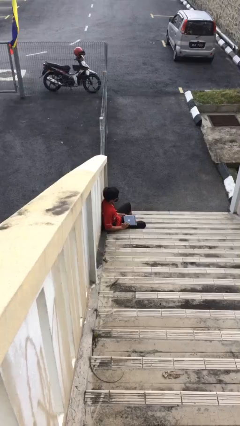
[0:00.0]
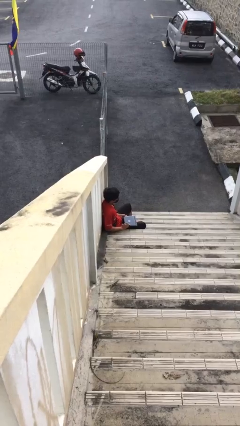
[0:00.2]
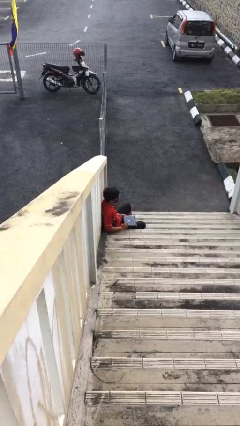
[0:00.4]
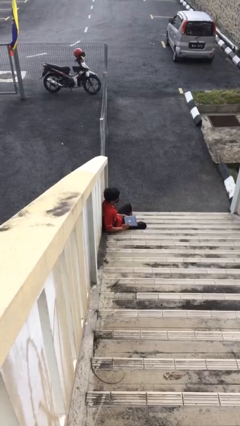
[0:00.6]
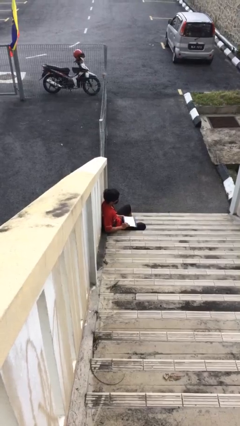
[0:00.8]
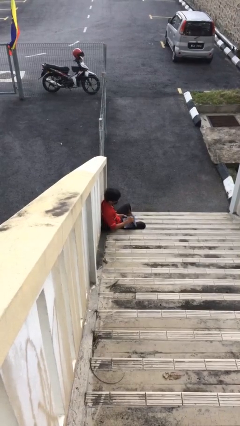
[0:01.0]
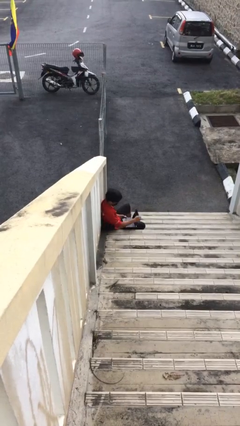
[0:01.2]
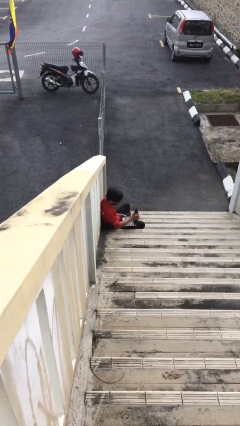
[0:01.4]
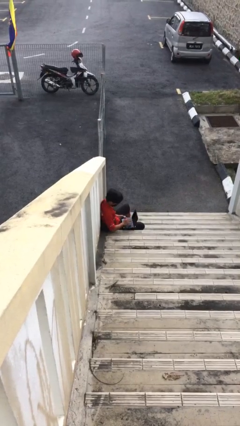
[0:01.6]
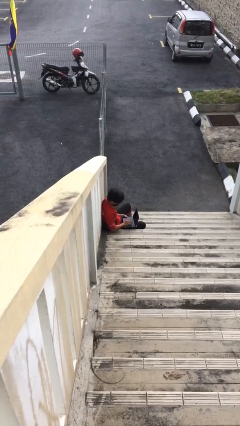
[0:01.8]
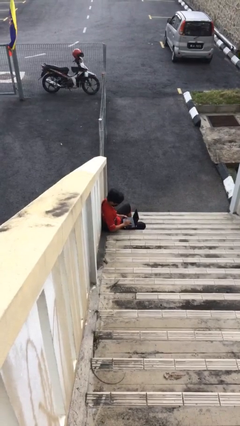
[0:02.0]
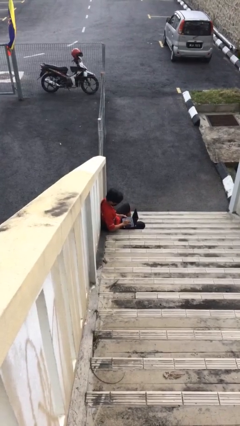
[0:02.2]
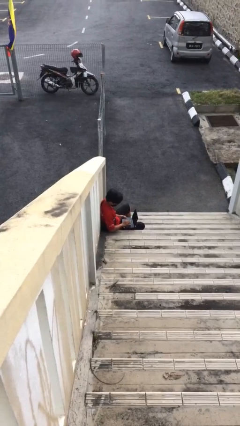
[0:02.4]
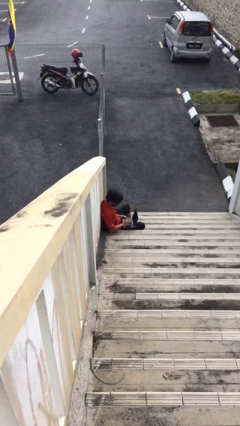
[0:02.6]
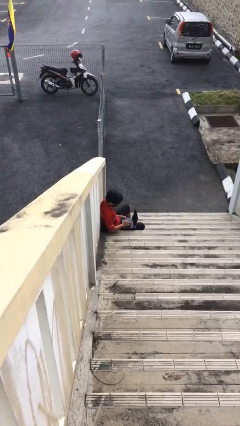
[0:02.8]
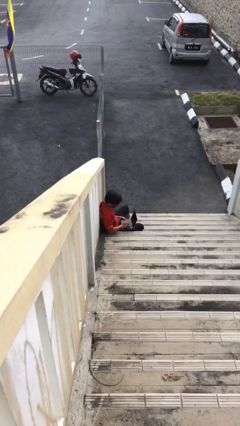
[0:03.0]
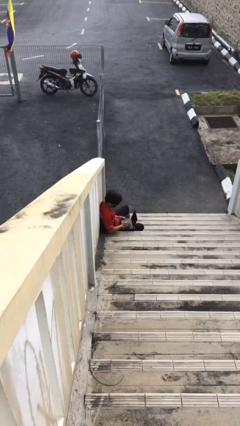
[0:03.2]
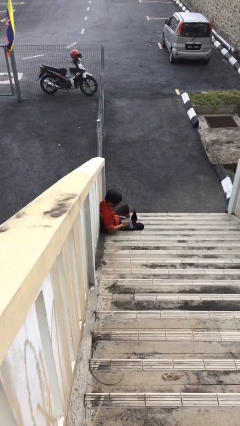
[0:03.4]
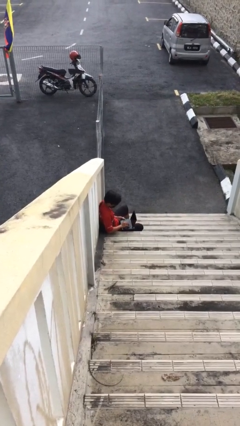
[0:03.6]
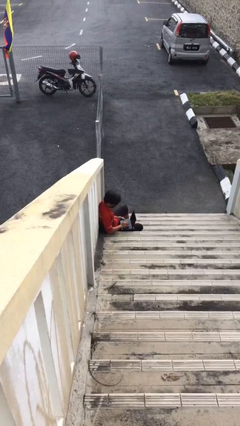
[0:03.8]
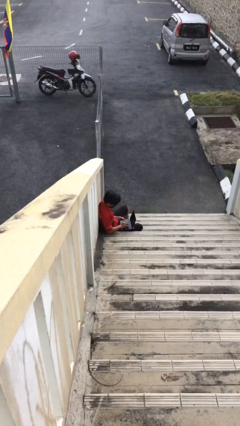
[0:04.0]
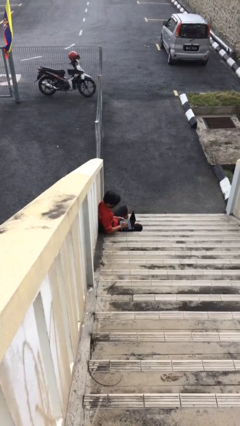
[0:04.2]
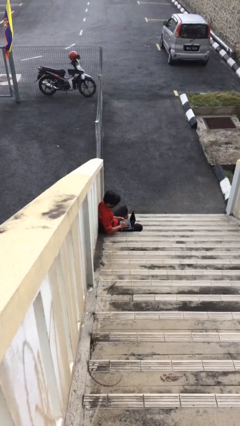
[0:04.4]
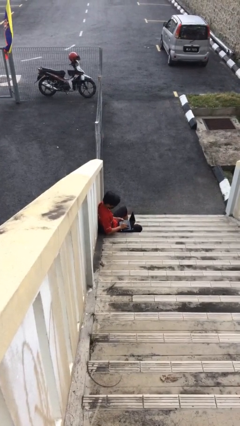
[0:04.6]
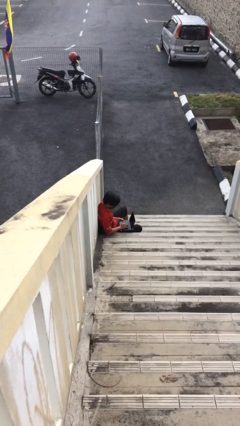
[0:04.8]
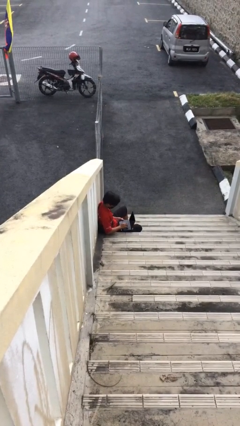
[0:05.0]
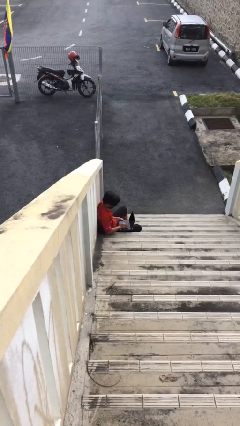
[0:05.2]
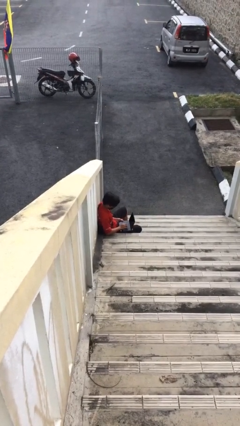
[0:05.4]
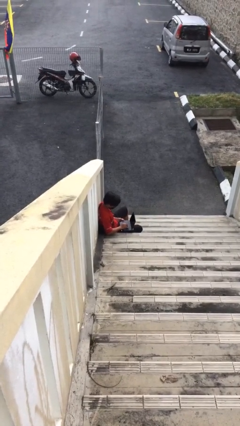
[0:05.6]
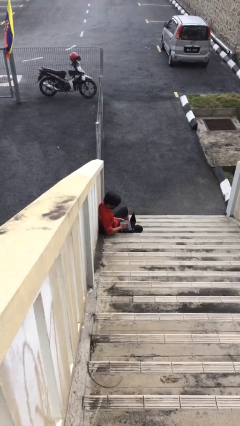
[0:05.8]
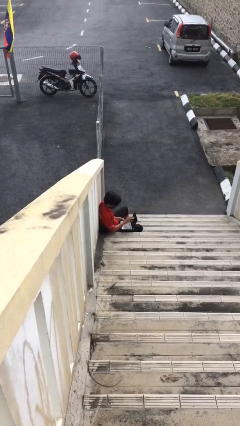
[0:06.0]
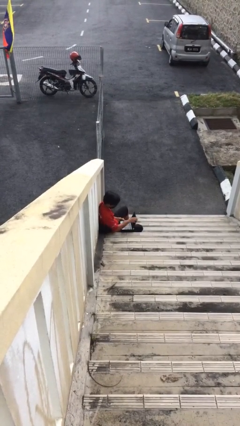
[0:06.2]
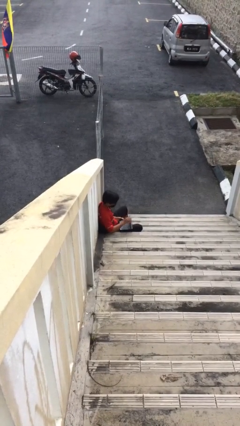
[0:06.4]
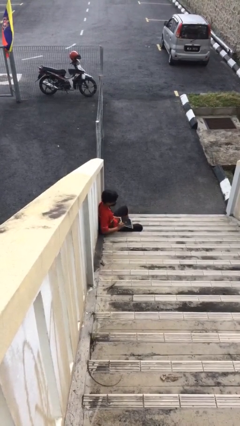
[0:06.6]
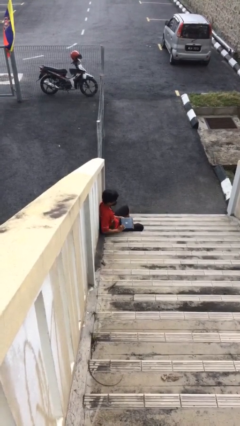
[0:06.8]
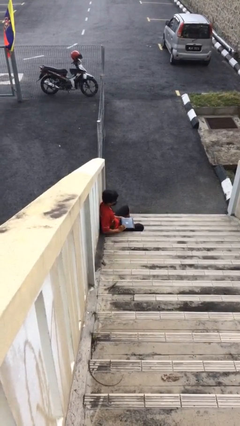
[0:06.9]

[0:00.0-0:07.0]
person interacts with laptop

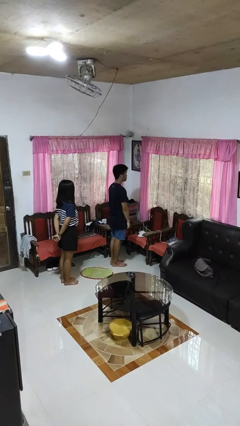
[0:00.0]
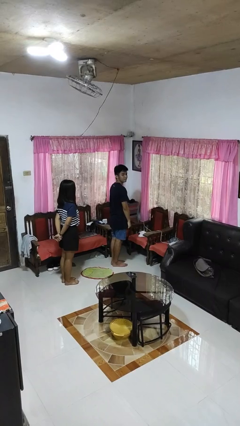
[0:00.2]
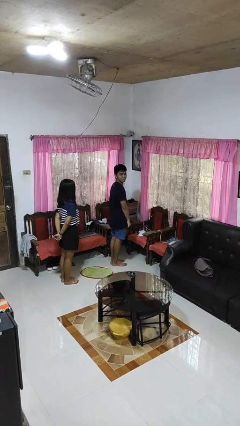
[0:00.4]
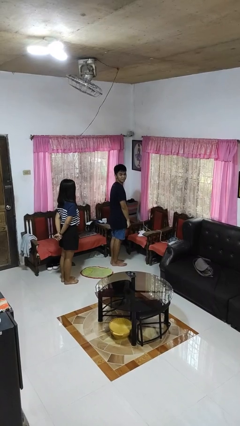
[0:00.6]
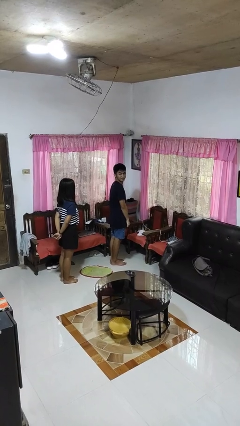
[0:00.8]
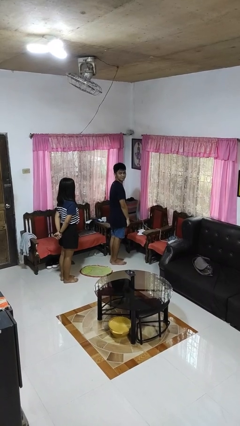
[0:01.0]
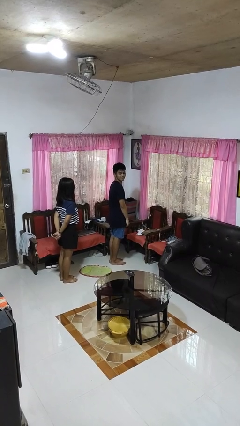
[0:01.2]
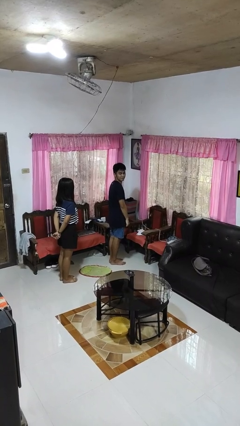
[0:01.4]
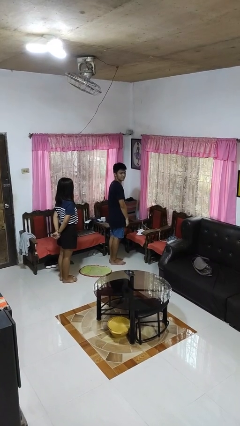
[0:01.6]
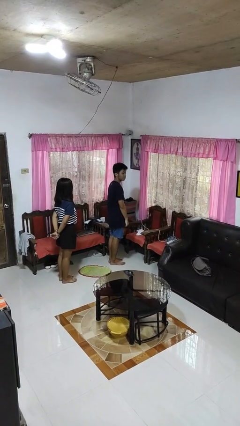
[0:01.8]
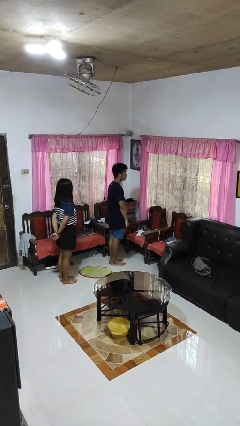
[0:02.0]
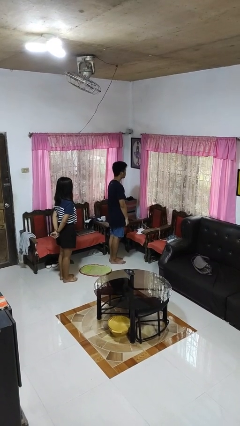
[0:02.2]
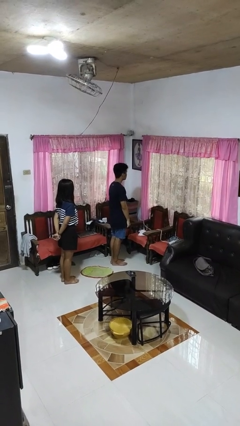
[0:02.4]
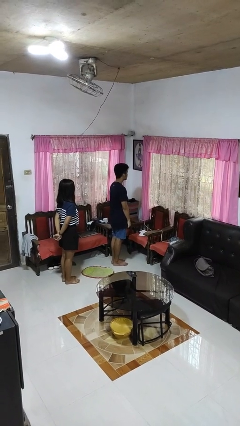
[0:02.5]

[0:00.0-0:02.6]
person looks over shoulder

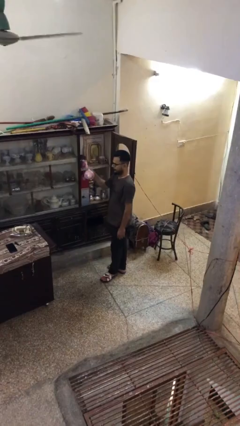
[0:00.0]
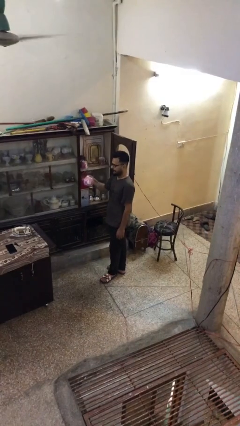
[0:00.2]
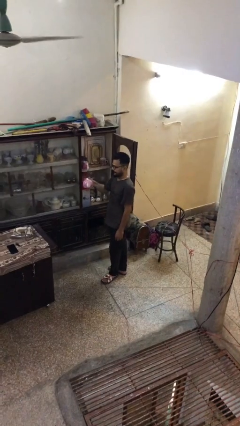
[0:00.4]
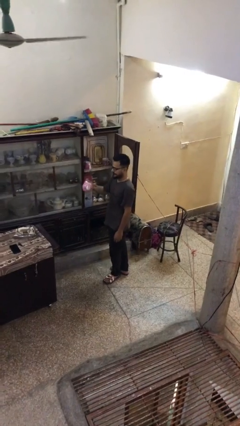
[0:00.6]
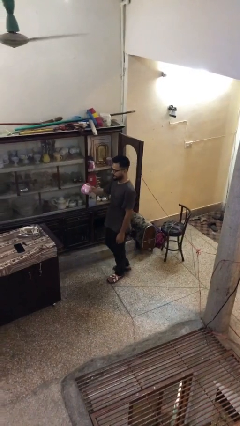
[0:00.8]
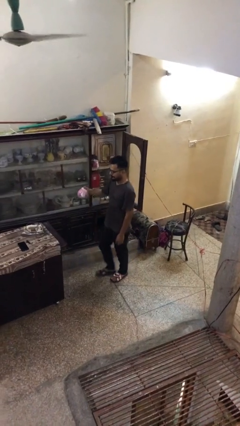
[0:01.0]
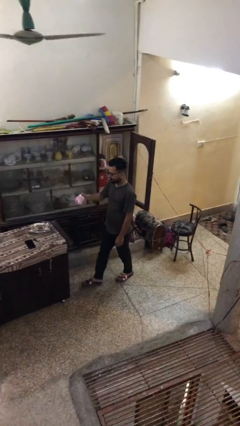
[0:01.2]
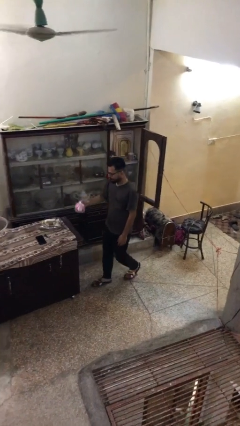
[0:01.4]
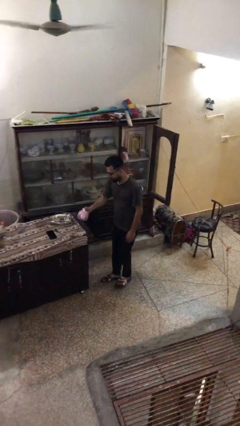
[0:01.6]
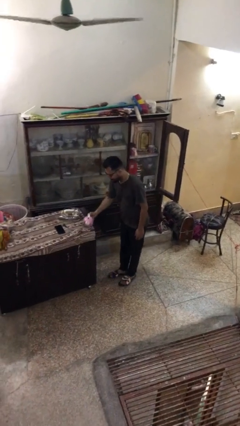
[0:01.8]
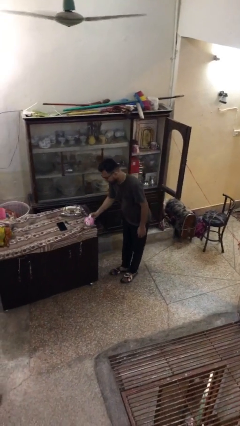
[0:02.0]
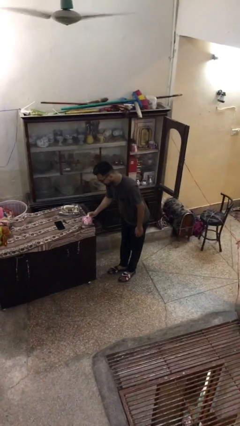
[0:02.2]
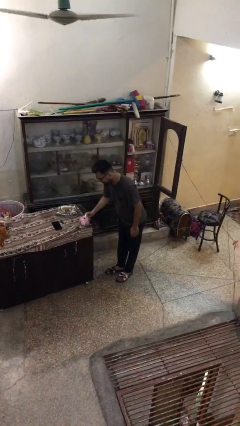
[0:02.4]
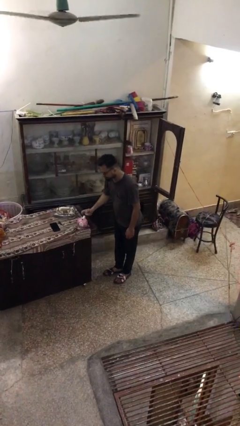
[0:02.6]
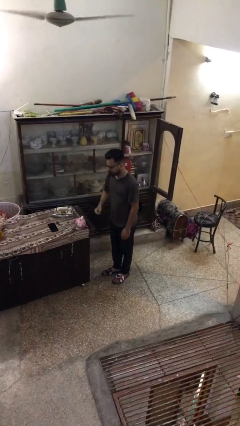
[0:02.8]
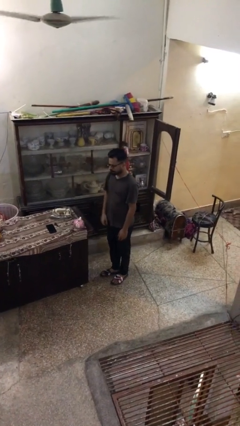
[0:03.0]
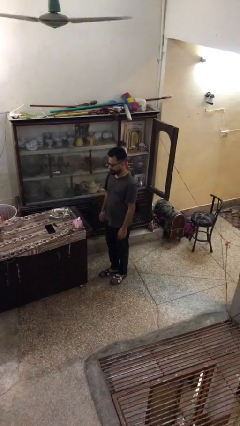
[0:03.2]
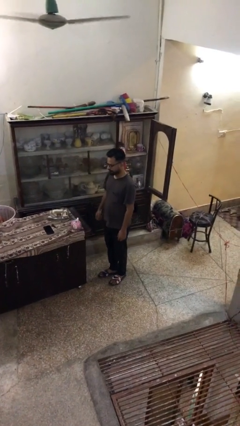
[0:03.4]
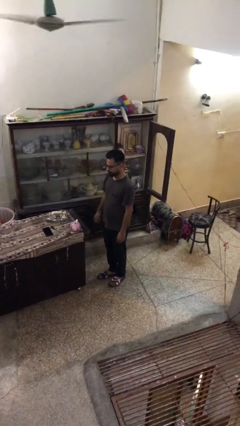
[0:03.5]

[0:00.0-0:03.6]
person puts down object on table

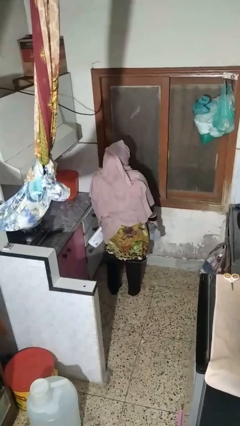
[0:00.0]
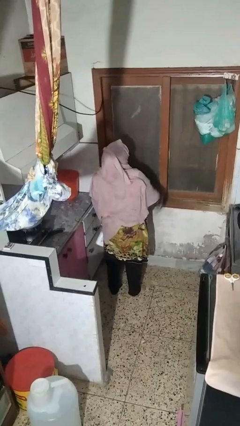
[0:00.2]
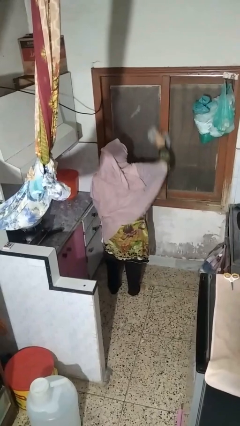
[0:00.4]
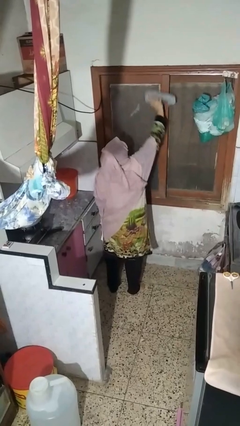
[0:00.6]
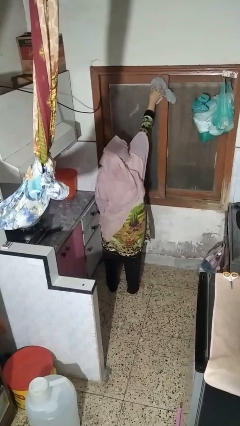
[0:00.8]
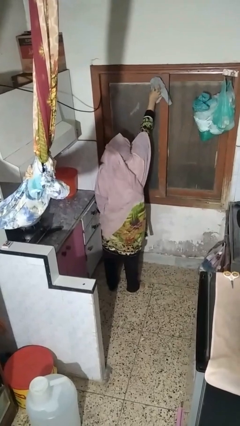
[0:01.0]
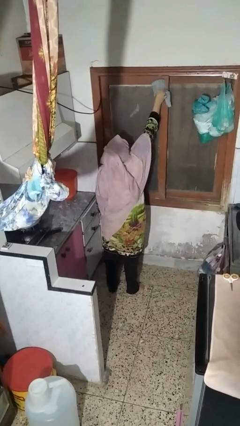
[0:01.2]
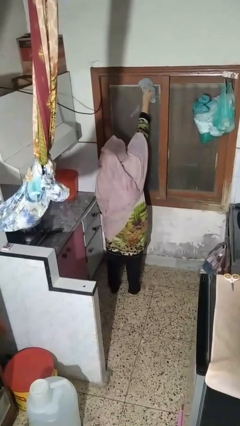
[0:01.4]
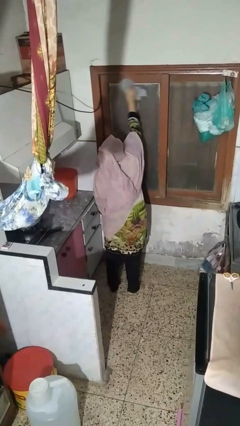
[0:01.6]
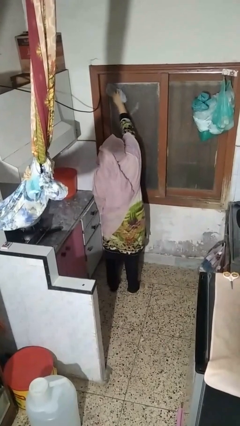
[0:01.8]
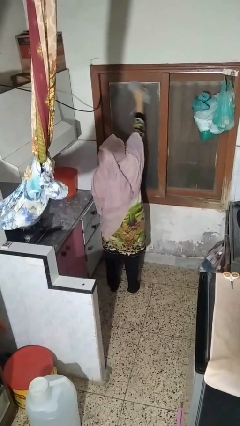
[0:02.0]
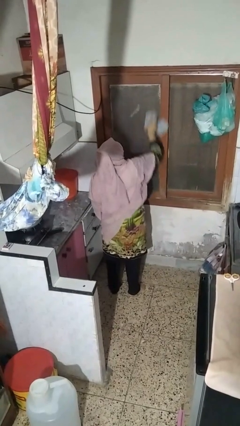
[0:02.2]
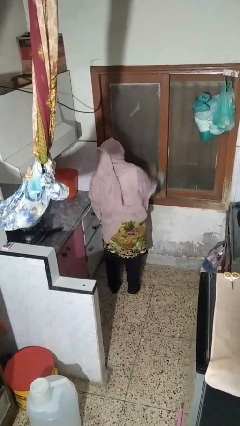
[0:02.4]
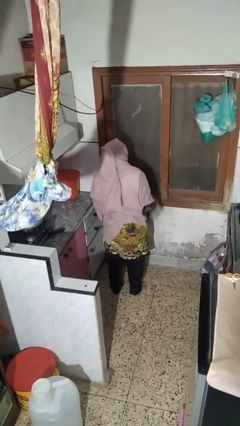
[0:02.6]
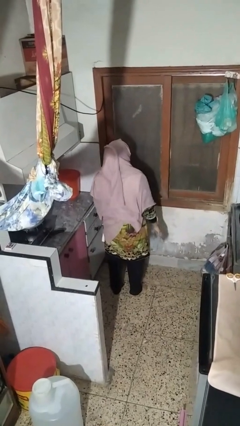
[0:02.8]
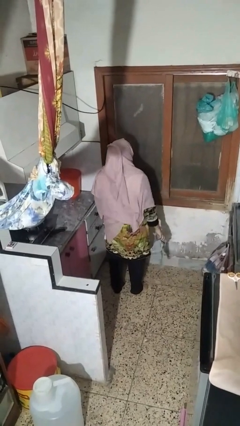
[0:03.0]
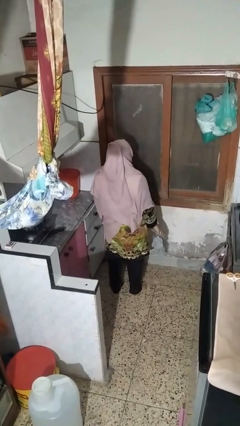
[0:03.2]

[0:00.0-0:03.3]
person washes window

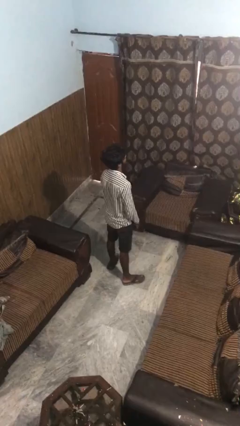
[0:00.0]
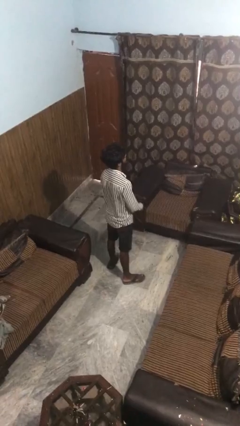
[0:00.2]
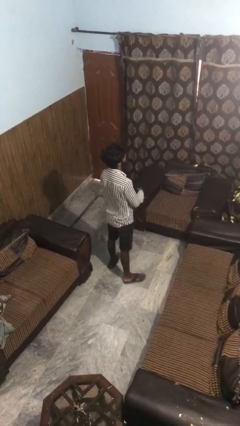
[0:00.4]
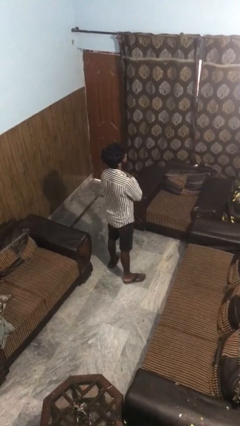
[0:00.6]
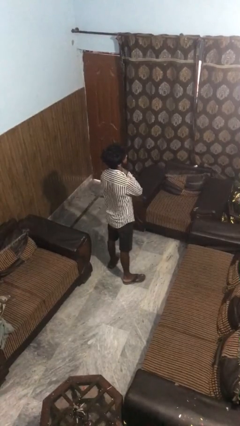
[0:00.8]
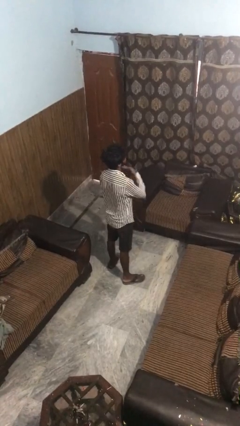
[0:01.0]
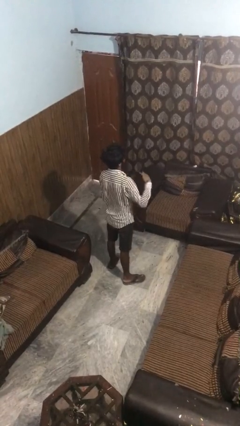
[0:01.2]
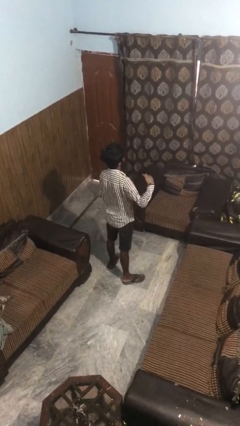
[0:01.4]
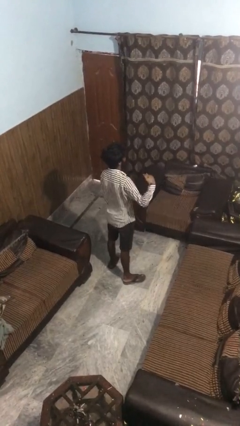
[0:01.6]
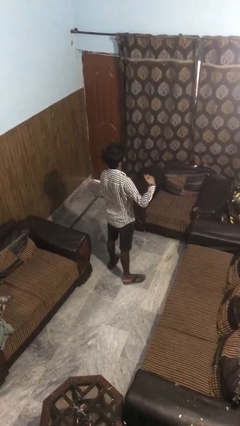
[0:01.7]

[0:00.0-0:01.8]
person gestures cut
